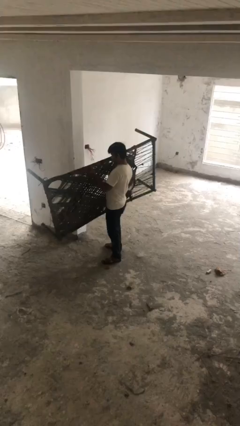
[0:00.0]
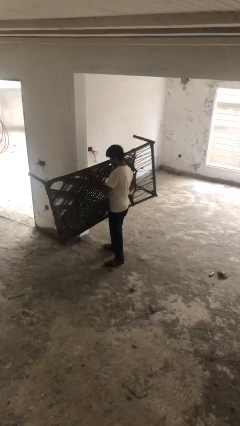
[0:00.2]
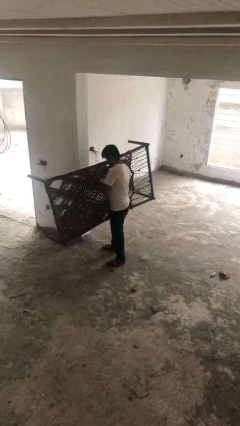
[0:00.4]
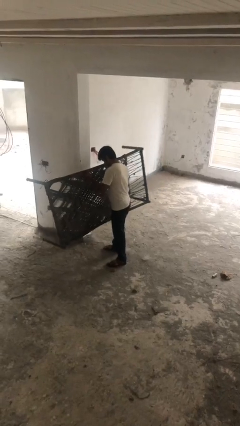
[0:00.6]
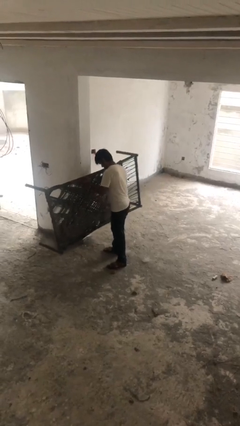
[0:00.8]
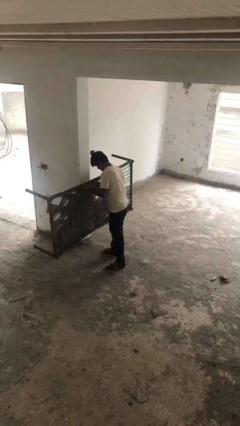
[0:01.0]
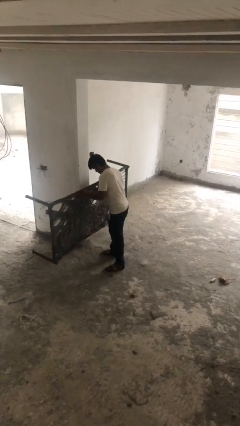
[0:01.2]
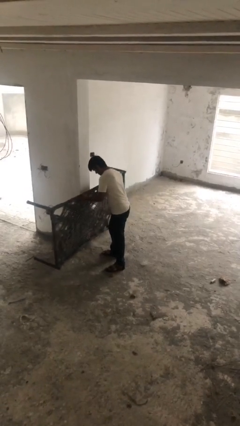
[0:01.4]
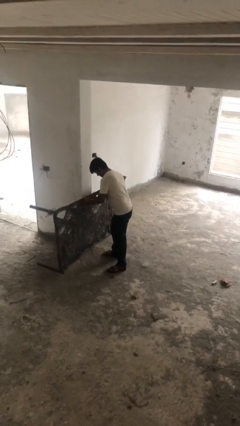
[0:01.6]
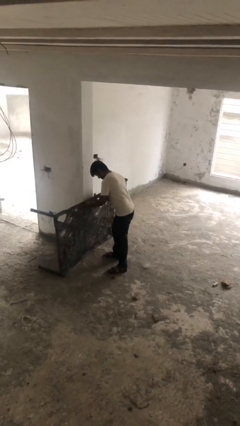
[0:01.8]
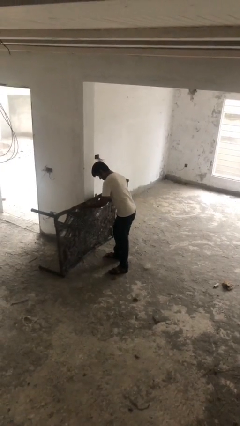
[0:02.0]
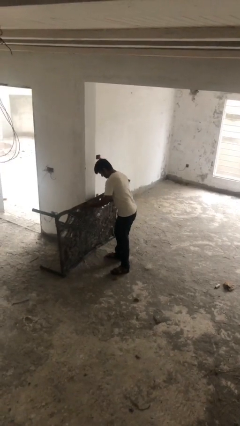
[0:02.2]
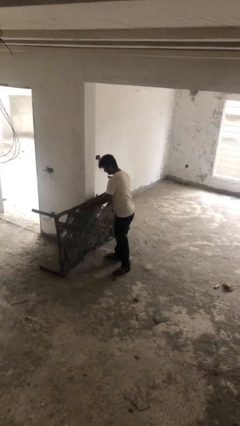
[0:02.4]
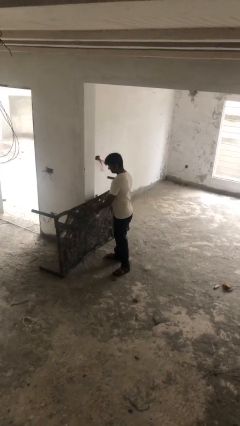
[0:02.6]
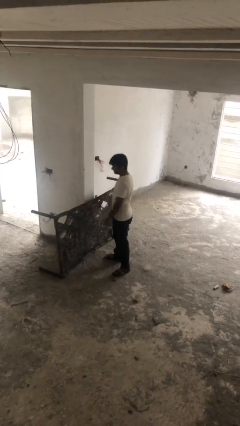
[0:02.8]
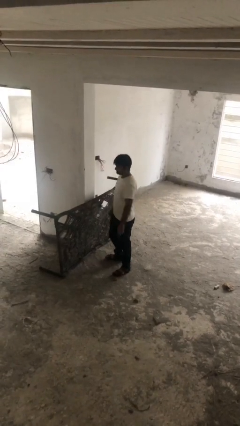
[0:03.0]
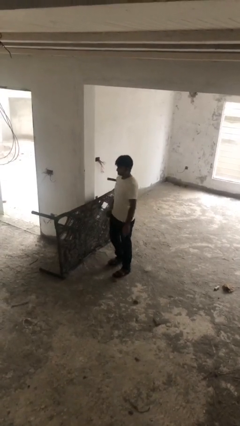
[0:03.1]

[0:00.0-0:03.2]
person puts down object on floor

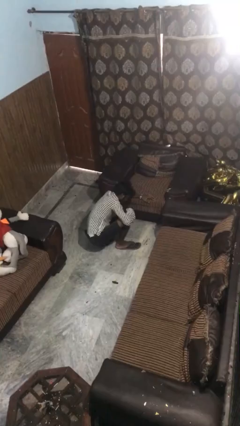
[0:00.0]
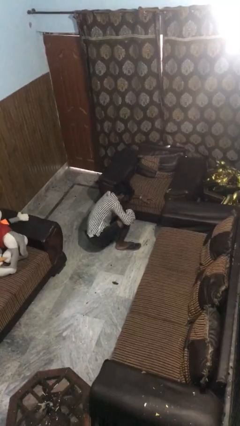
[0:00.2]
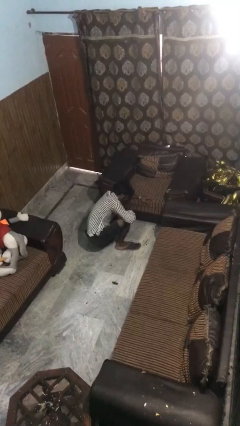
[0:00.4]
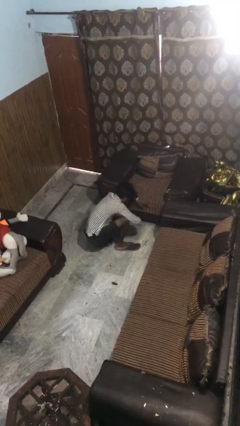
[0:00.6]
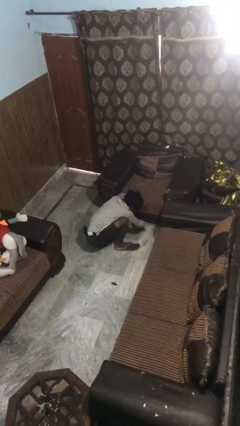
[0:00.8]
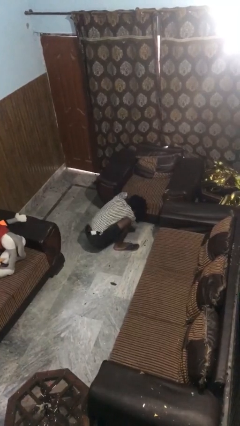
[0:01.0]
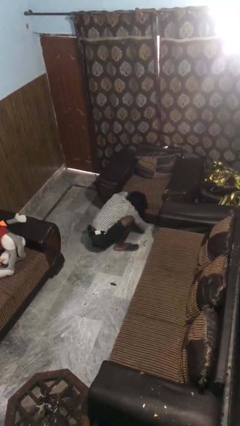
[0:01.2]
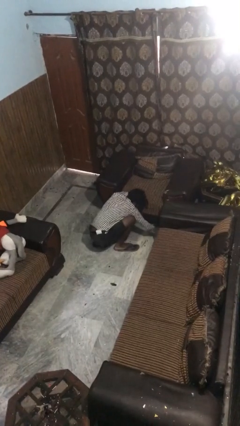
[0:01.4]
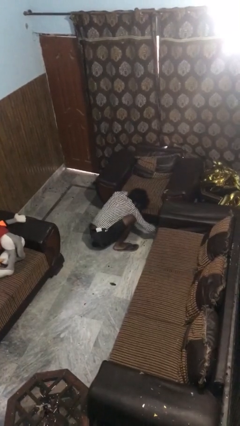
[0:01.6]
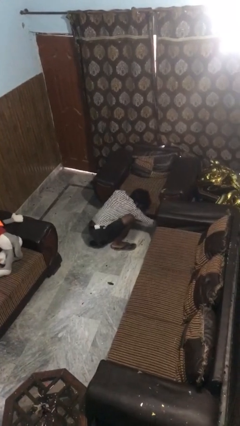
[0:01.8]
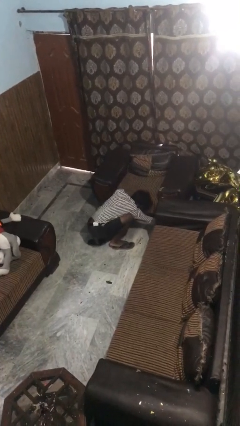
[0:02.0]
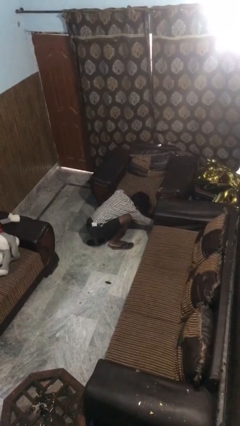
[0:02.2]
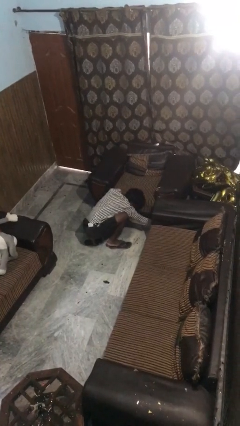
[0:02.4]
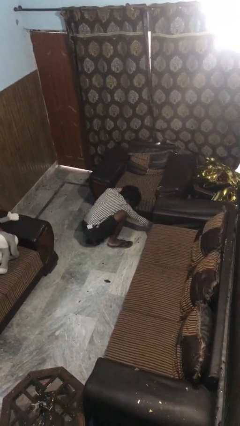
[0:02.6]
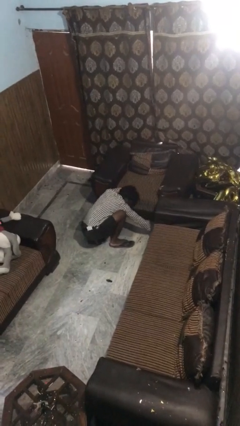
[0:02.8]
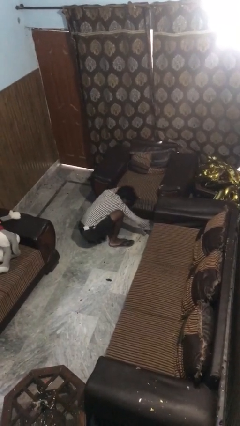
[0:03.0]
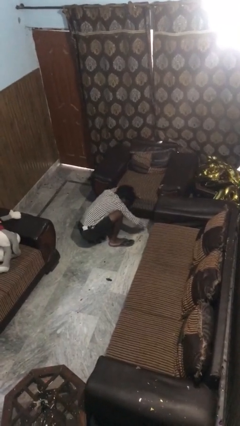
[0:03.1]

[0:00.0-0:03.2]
person searches under couch

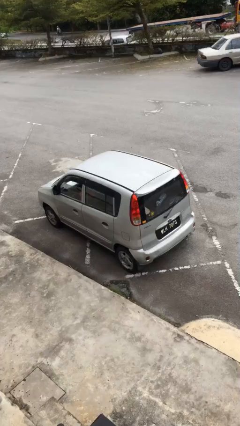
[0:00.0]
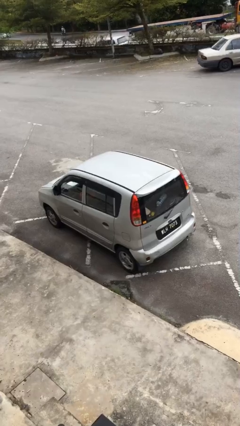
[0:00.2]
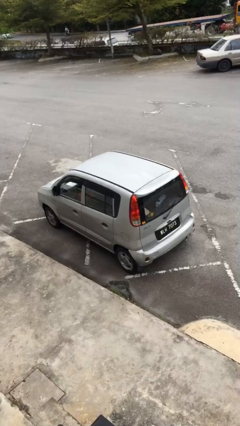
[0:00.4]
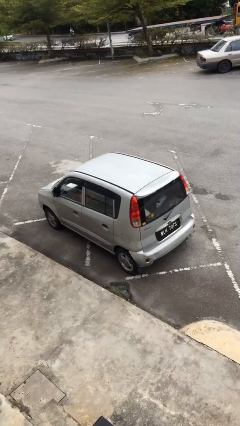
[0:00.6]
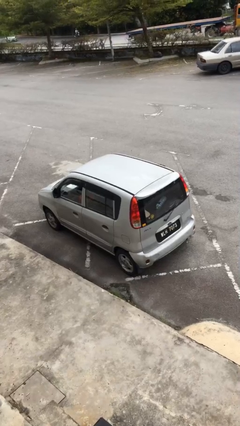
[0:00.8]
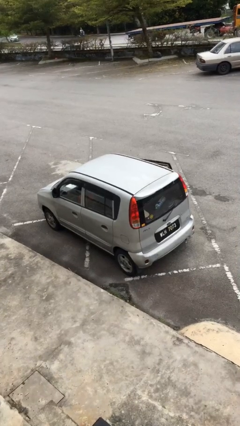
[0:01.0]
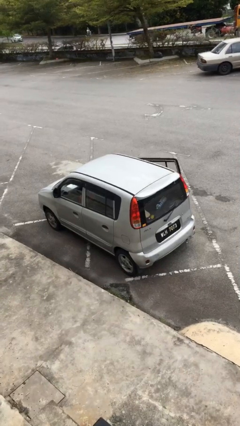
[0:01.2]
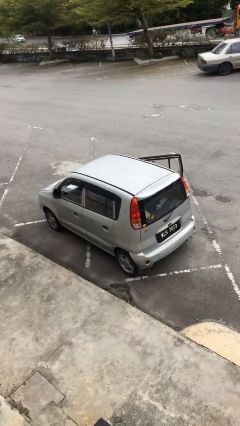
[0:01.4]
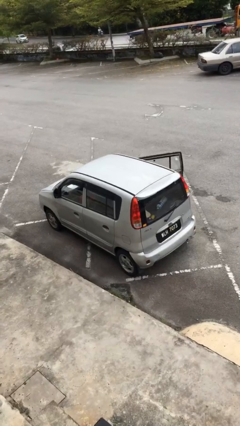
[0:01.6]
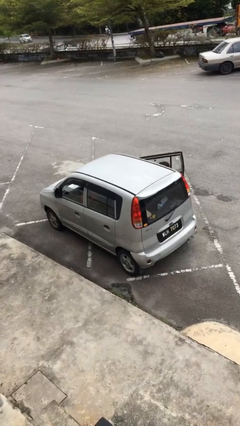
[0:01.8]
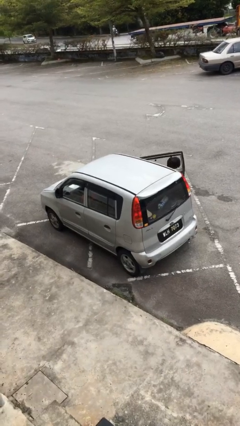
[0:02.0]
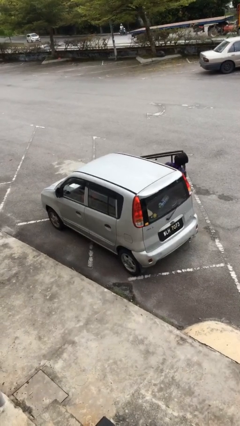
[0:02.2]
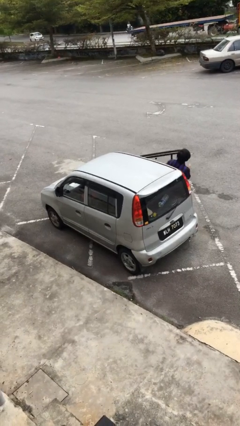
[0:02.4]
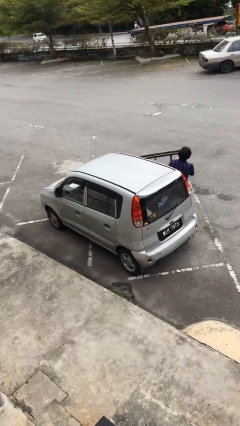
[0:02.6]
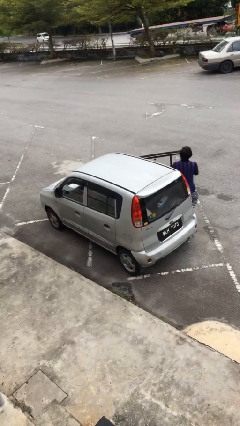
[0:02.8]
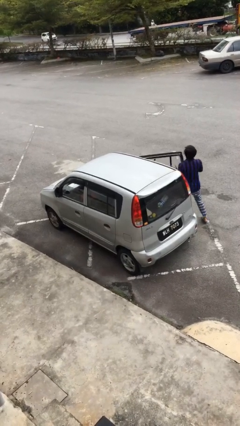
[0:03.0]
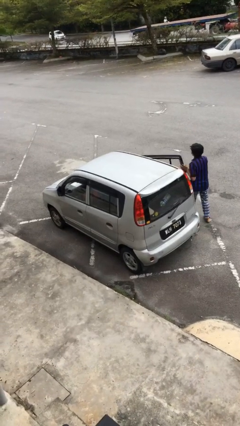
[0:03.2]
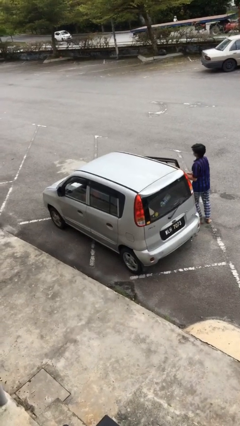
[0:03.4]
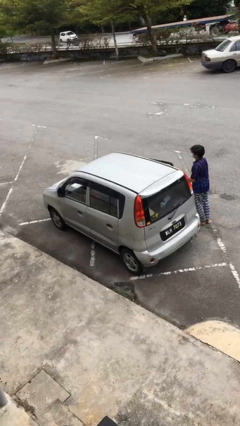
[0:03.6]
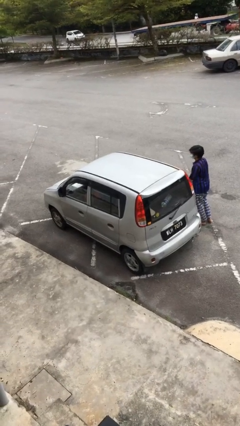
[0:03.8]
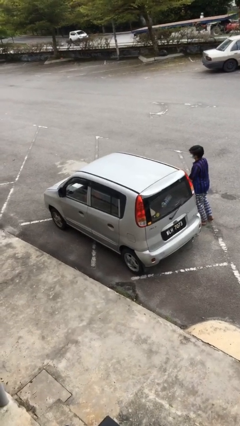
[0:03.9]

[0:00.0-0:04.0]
car drops off person

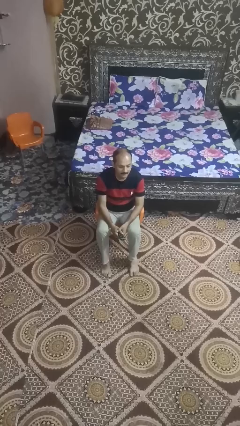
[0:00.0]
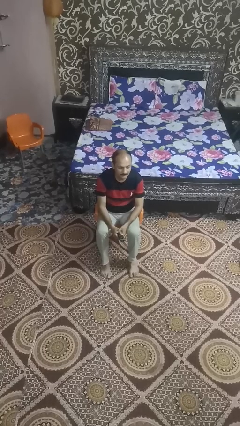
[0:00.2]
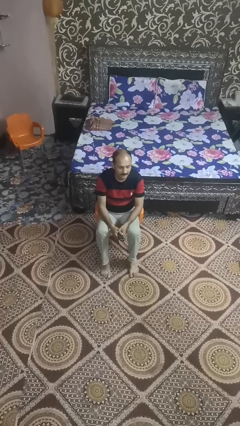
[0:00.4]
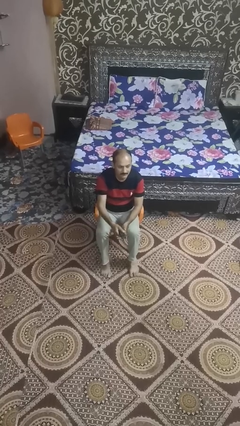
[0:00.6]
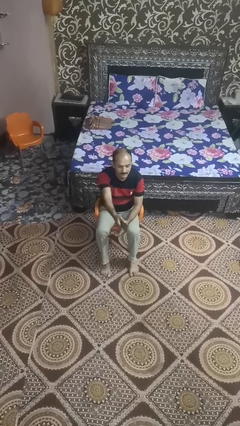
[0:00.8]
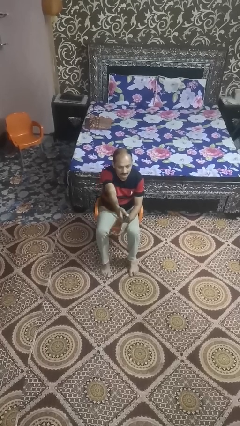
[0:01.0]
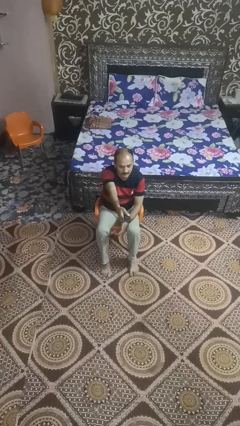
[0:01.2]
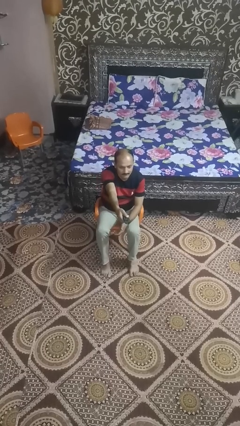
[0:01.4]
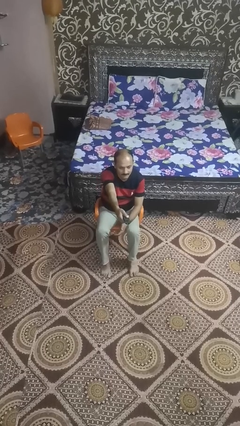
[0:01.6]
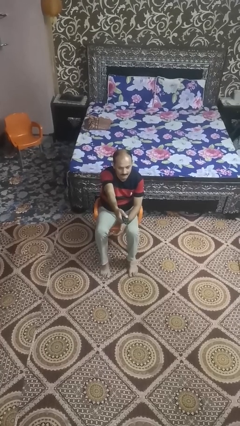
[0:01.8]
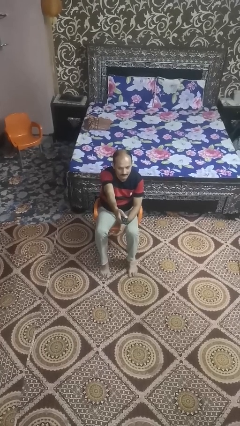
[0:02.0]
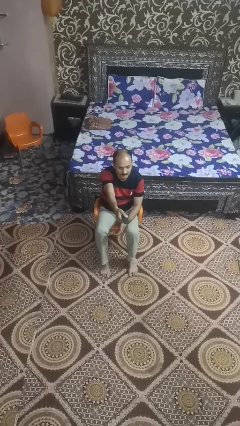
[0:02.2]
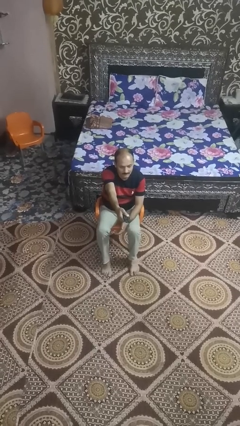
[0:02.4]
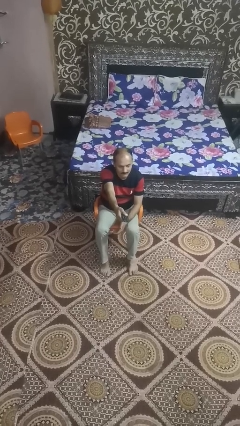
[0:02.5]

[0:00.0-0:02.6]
person uses television remote

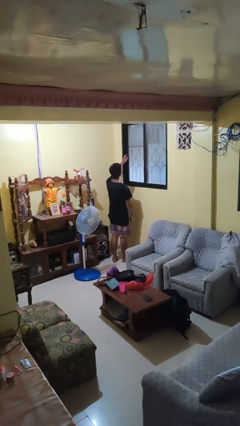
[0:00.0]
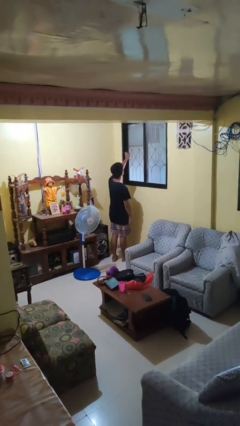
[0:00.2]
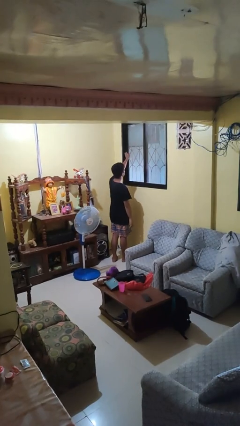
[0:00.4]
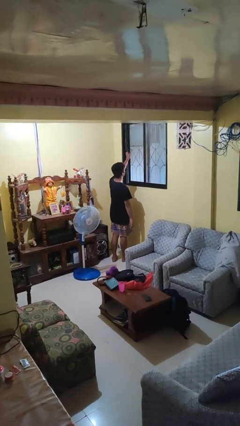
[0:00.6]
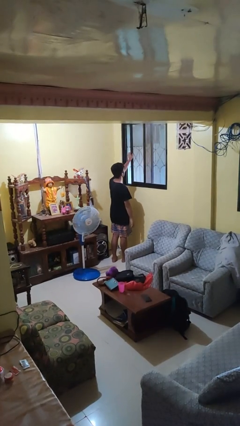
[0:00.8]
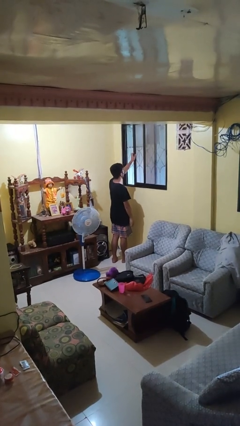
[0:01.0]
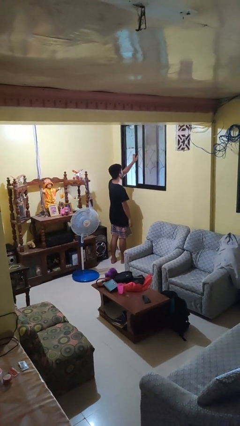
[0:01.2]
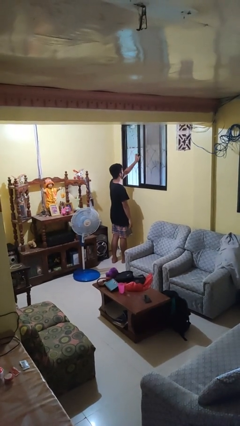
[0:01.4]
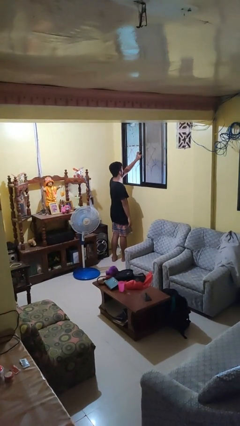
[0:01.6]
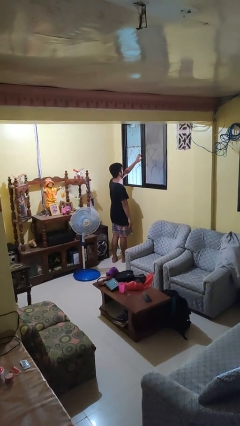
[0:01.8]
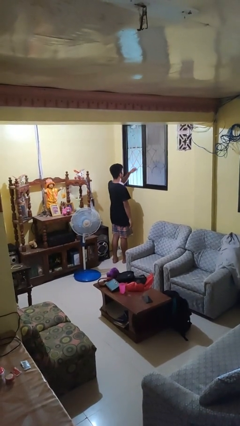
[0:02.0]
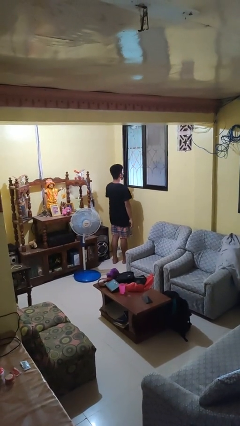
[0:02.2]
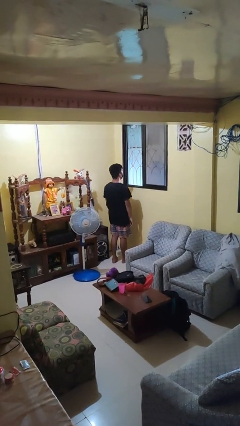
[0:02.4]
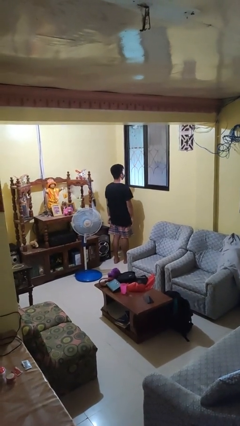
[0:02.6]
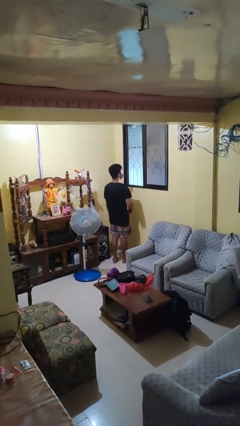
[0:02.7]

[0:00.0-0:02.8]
person opens home window

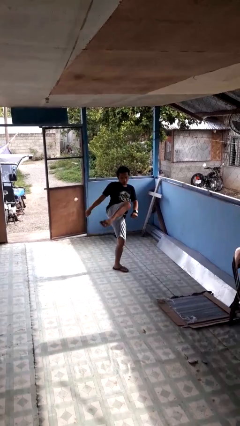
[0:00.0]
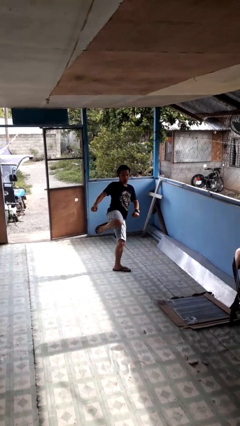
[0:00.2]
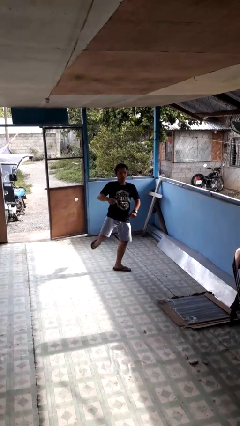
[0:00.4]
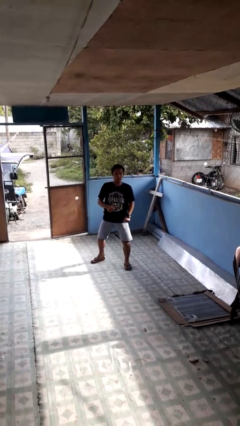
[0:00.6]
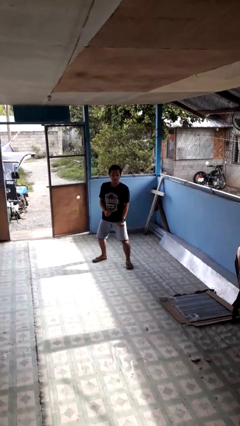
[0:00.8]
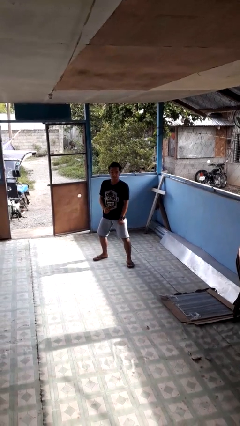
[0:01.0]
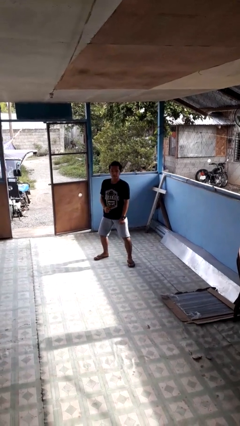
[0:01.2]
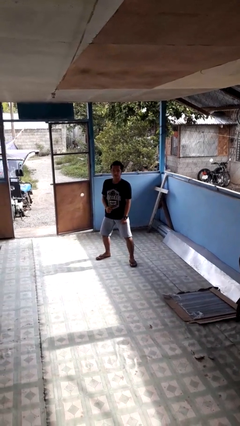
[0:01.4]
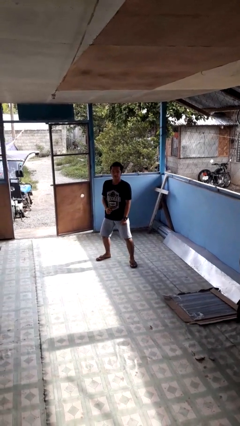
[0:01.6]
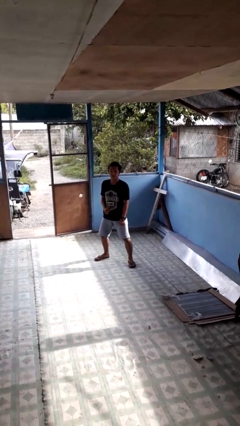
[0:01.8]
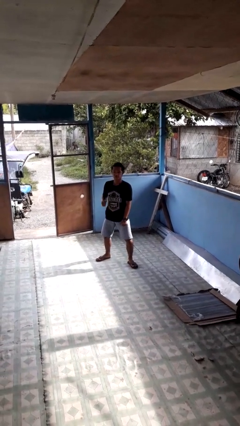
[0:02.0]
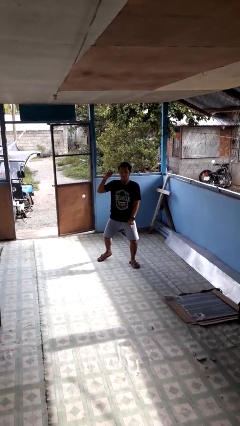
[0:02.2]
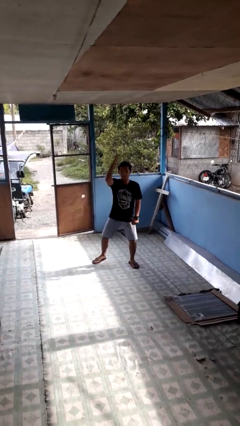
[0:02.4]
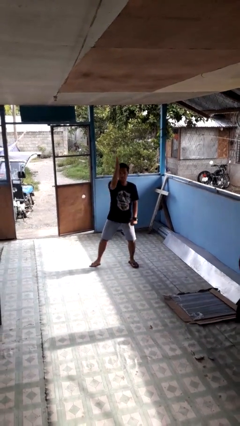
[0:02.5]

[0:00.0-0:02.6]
person karate kicks
